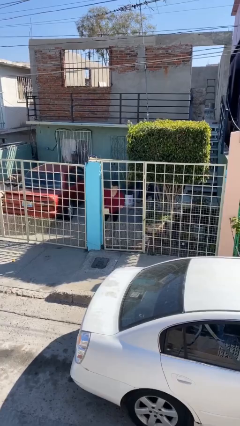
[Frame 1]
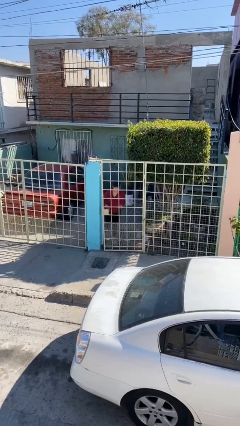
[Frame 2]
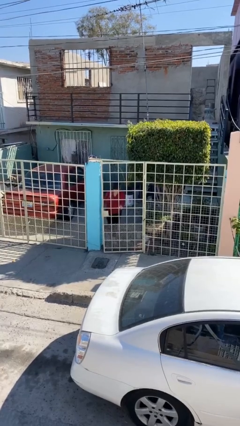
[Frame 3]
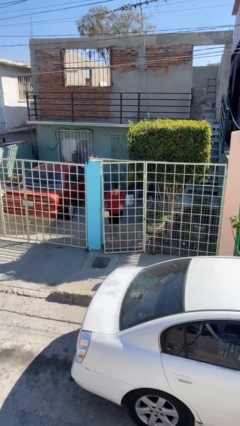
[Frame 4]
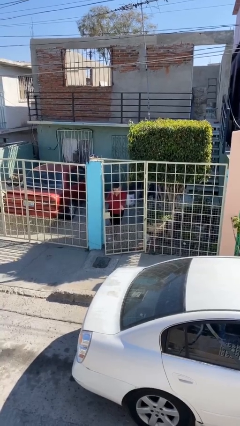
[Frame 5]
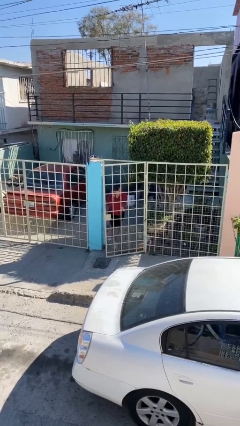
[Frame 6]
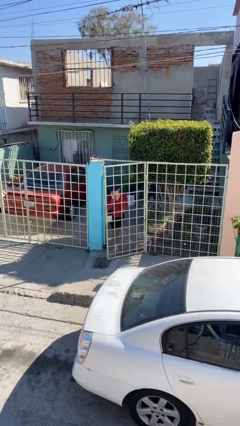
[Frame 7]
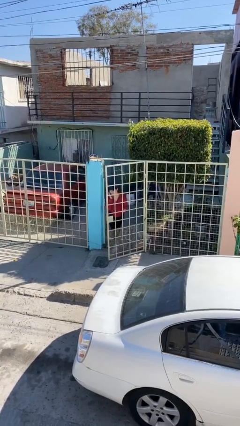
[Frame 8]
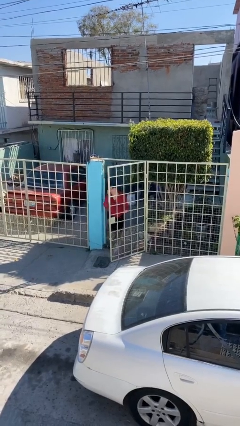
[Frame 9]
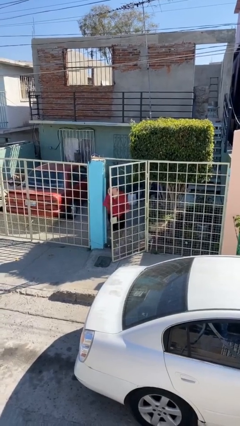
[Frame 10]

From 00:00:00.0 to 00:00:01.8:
person opens facility door

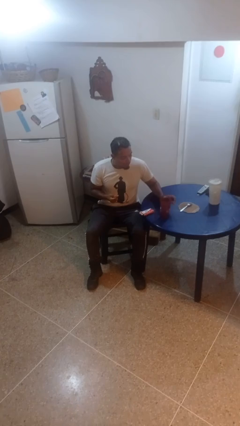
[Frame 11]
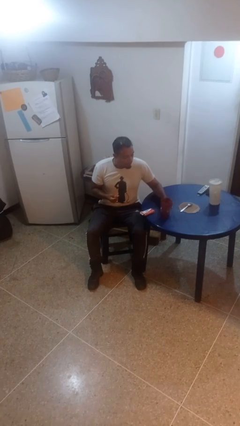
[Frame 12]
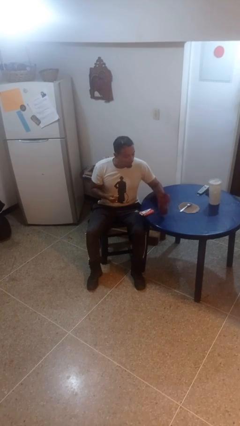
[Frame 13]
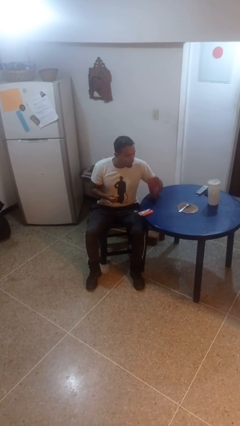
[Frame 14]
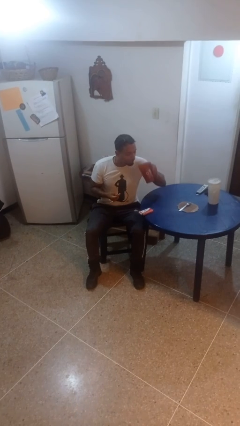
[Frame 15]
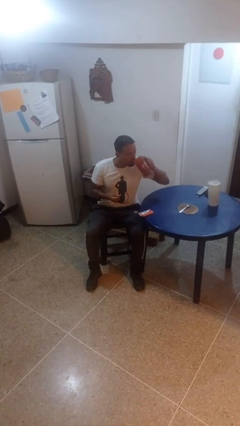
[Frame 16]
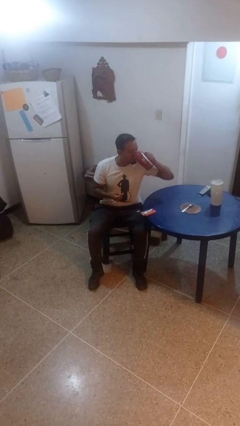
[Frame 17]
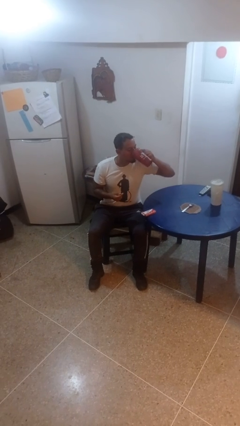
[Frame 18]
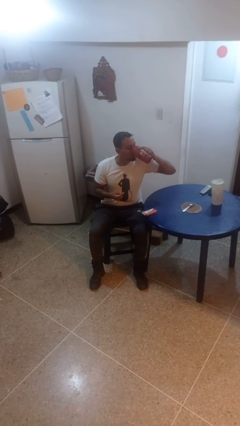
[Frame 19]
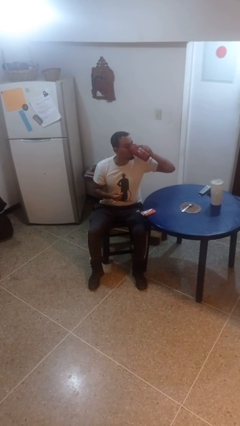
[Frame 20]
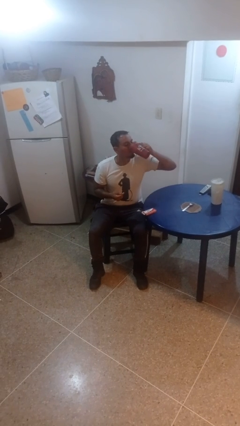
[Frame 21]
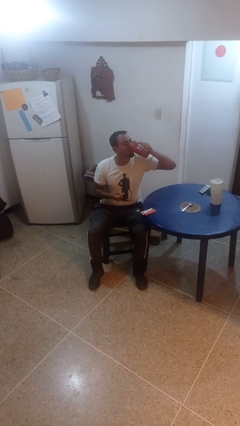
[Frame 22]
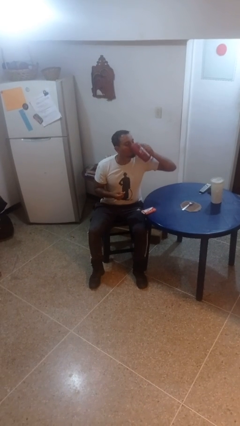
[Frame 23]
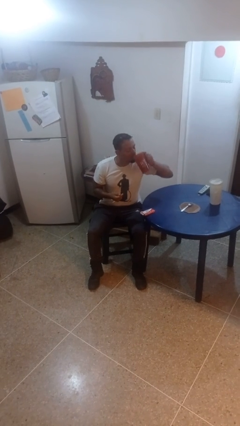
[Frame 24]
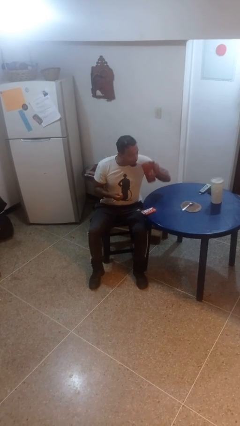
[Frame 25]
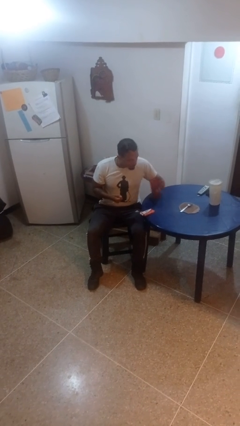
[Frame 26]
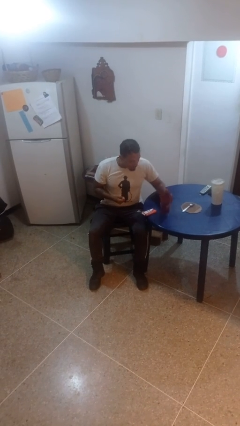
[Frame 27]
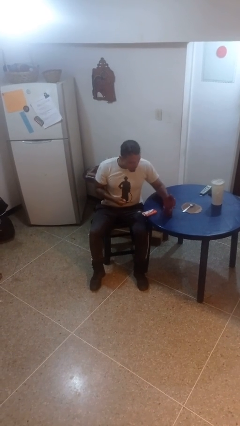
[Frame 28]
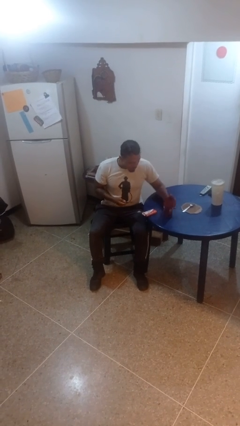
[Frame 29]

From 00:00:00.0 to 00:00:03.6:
person drinks from cup

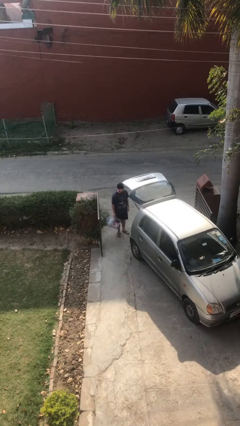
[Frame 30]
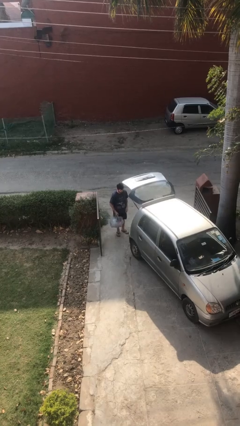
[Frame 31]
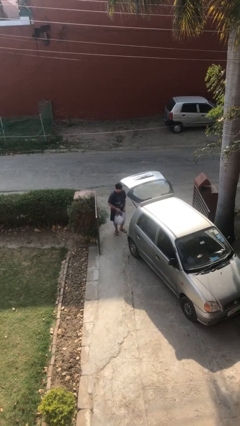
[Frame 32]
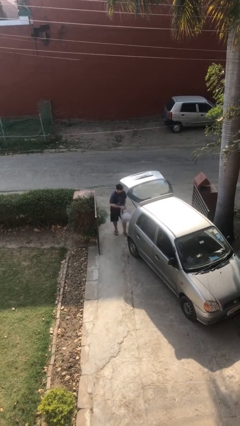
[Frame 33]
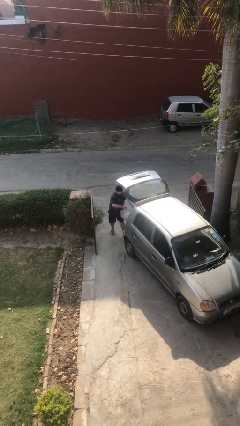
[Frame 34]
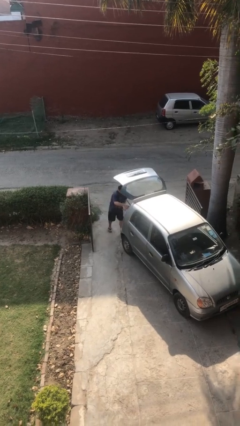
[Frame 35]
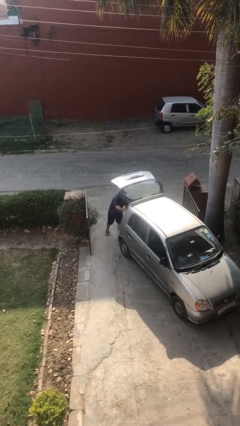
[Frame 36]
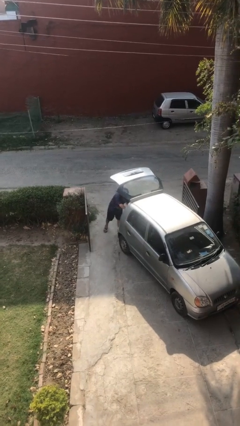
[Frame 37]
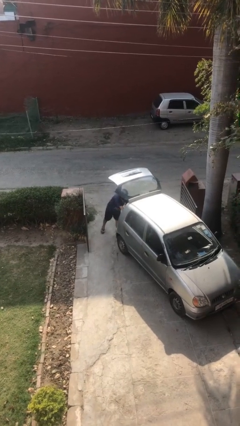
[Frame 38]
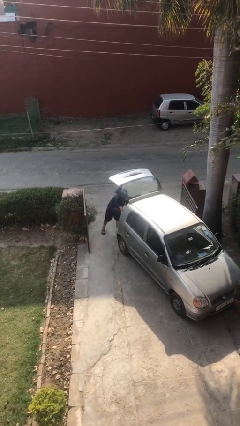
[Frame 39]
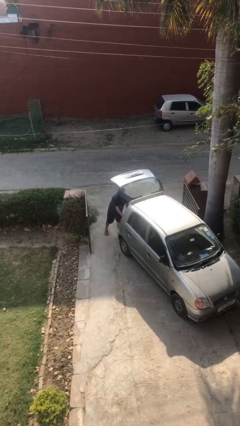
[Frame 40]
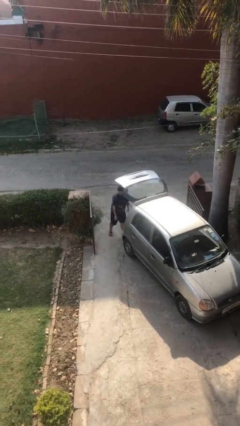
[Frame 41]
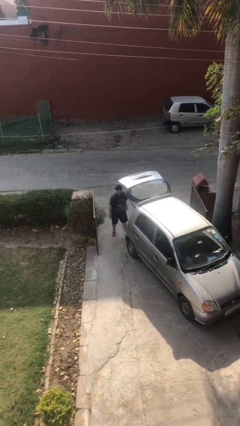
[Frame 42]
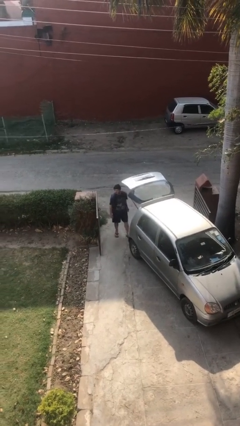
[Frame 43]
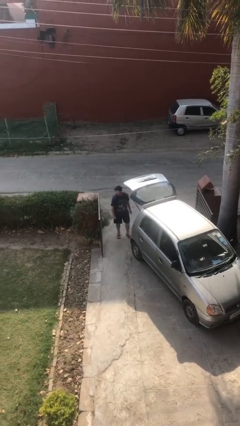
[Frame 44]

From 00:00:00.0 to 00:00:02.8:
person loads car

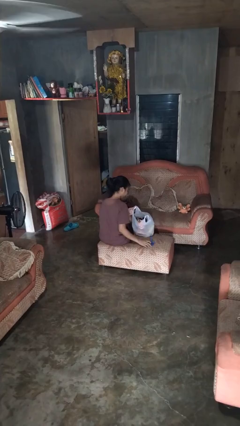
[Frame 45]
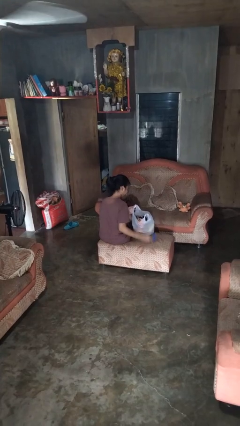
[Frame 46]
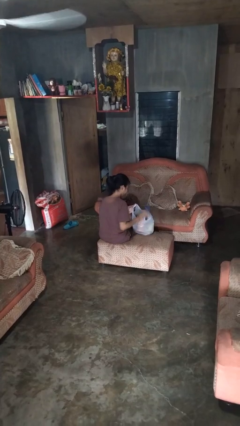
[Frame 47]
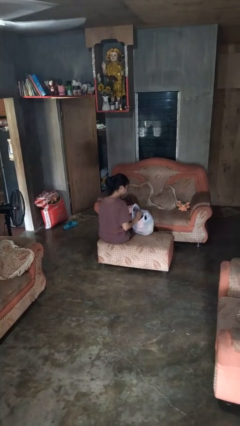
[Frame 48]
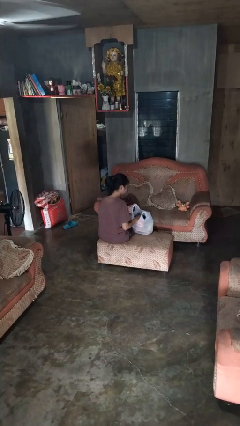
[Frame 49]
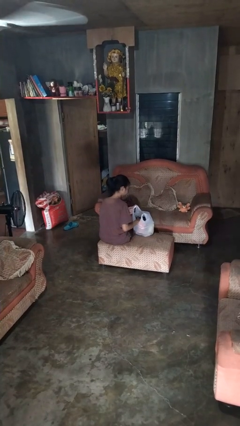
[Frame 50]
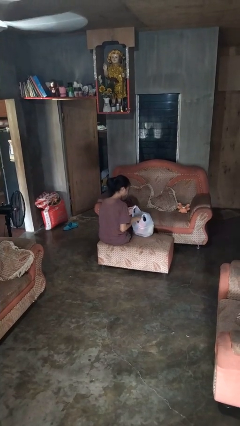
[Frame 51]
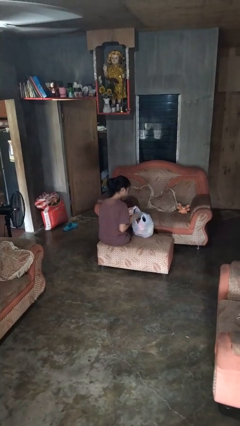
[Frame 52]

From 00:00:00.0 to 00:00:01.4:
person puts object into bag

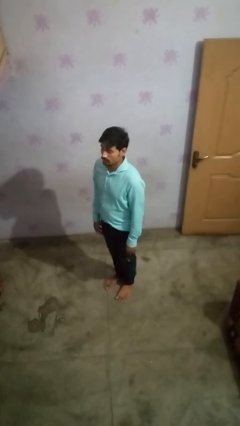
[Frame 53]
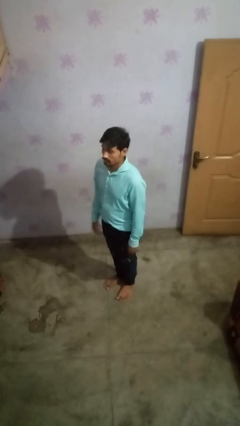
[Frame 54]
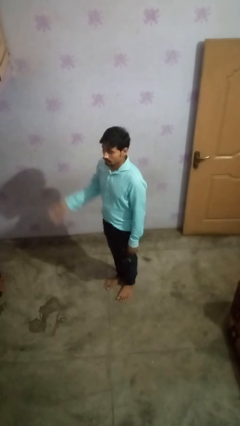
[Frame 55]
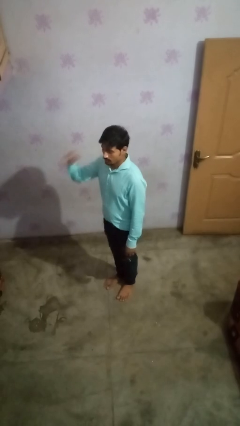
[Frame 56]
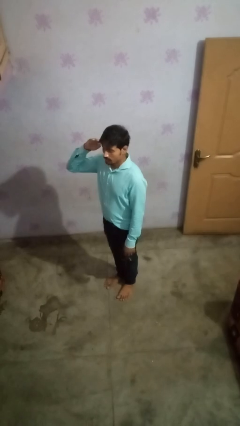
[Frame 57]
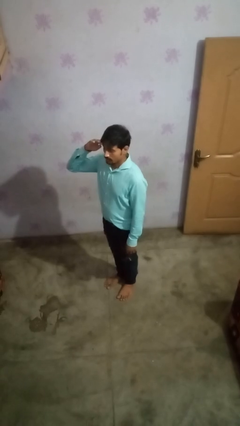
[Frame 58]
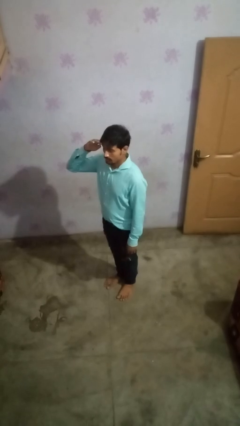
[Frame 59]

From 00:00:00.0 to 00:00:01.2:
person salutes

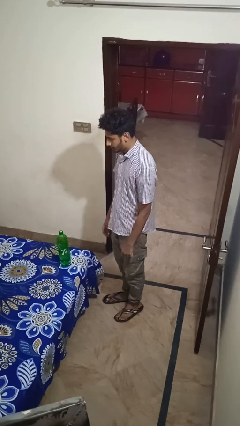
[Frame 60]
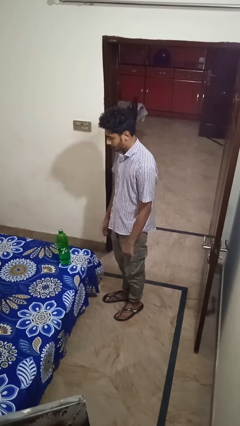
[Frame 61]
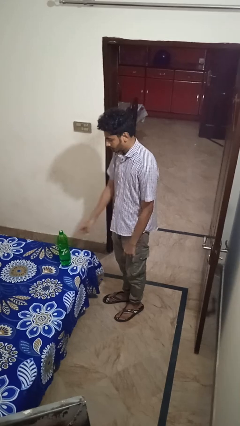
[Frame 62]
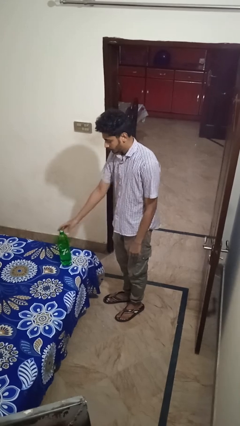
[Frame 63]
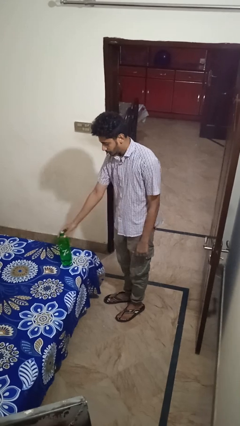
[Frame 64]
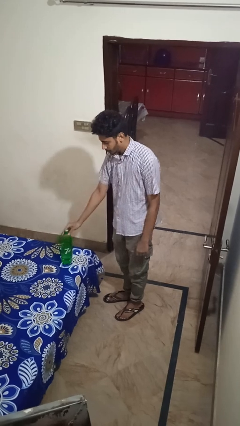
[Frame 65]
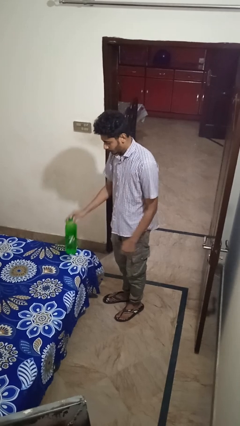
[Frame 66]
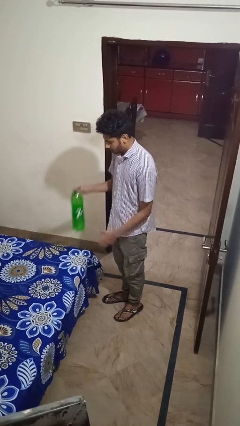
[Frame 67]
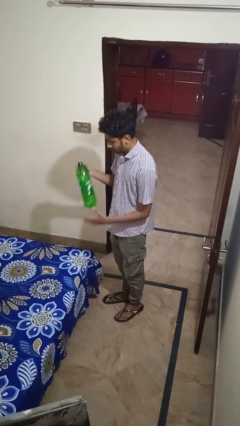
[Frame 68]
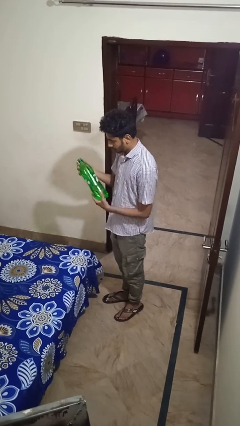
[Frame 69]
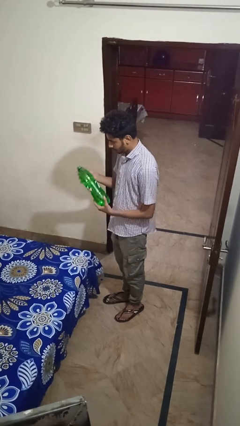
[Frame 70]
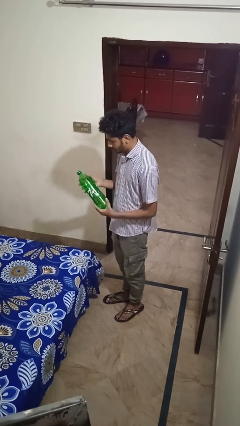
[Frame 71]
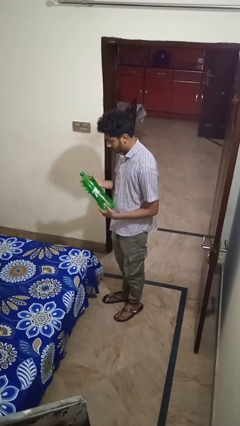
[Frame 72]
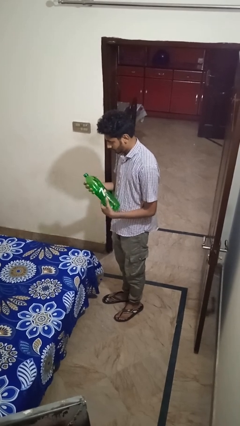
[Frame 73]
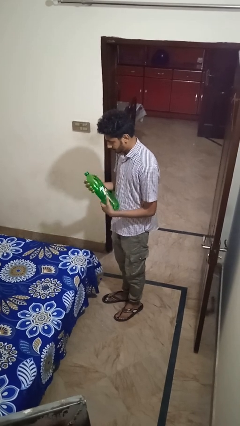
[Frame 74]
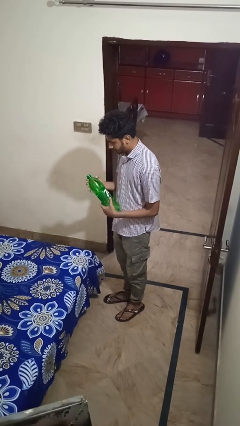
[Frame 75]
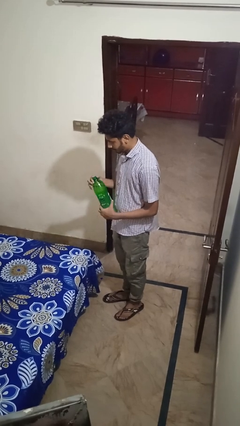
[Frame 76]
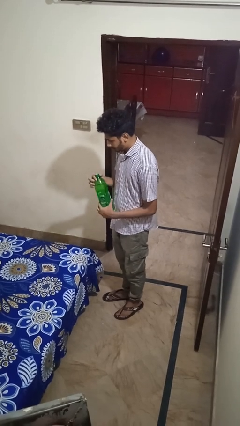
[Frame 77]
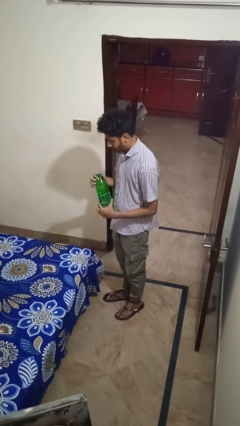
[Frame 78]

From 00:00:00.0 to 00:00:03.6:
person picks up object from bed

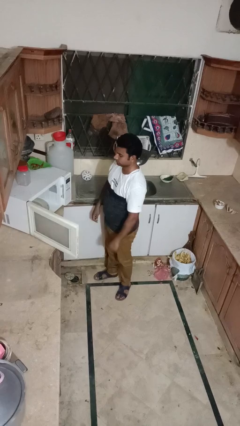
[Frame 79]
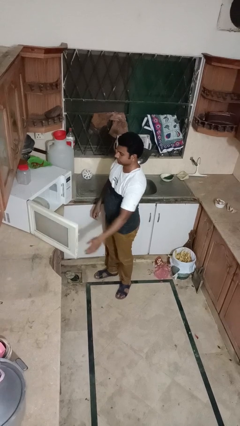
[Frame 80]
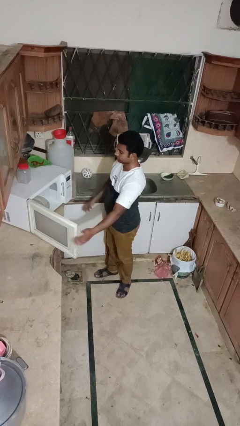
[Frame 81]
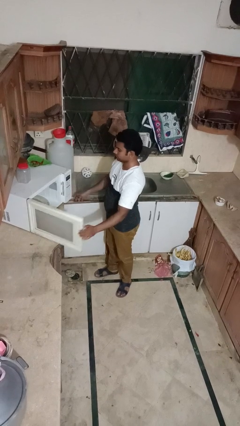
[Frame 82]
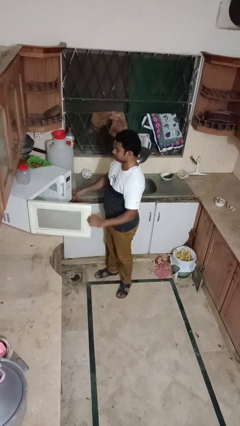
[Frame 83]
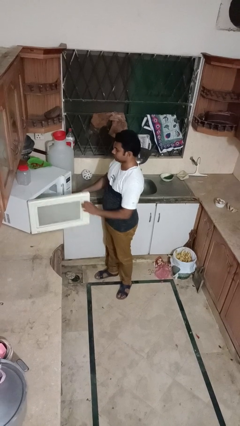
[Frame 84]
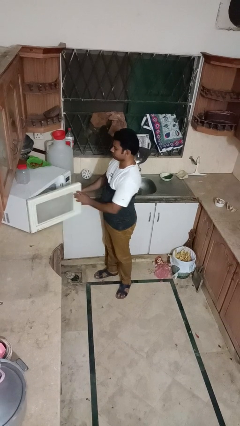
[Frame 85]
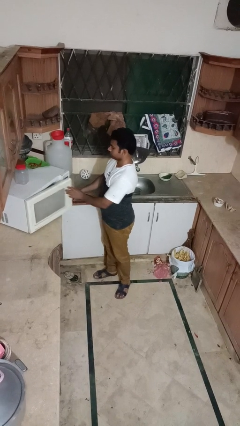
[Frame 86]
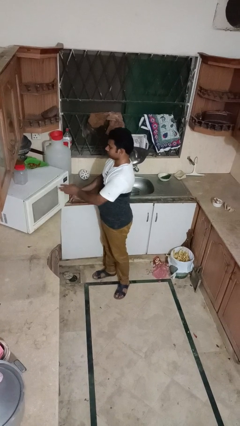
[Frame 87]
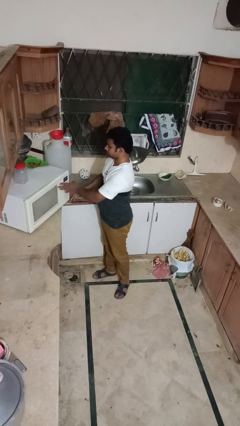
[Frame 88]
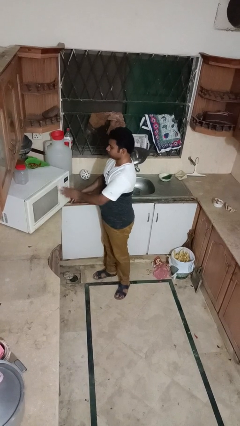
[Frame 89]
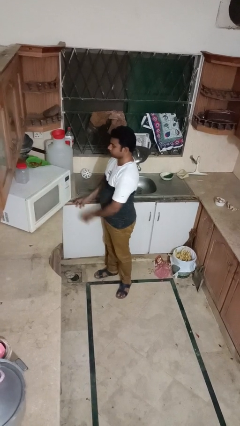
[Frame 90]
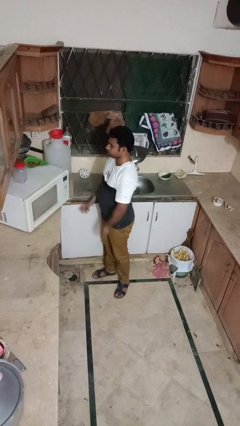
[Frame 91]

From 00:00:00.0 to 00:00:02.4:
person closes oven door

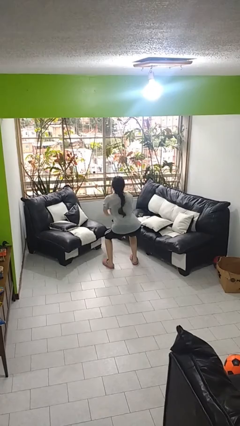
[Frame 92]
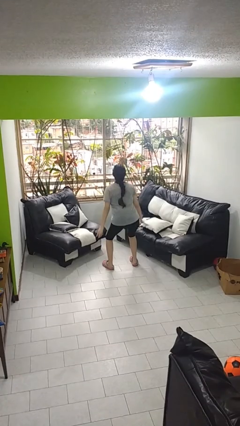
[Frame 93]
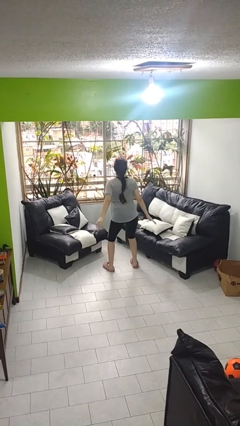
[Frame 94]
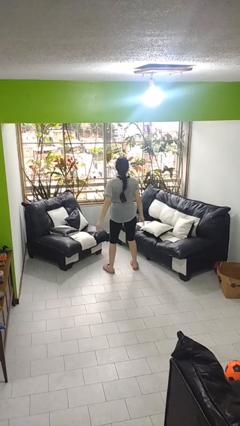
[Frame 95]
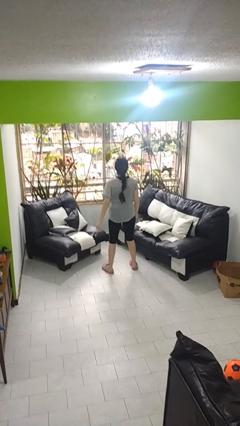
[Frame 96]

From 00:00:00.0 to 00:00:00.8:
person stands up
